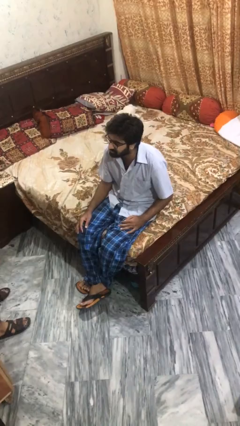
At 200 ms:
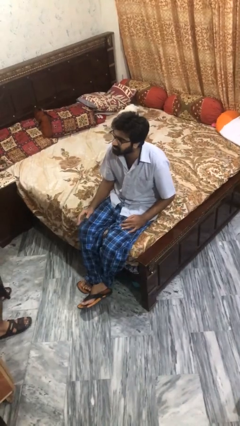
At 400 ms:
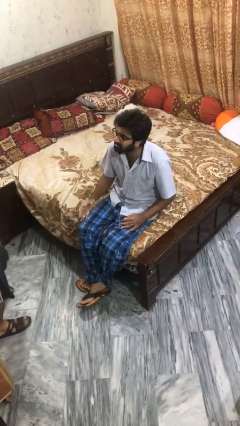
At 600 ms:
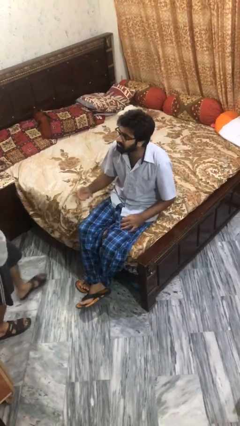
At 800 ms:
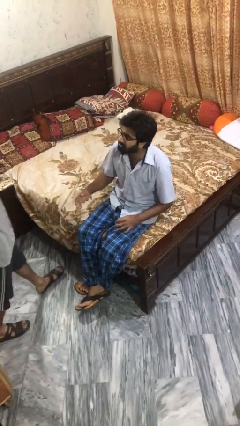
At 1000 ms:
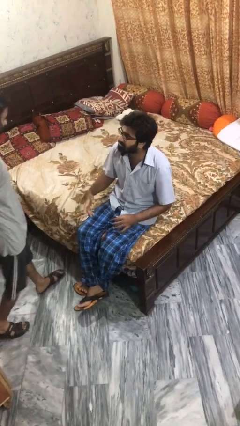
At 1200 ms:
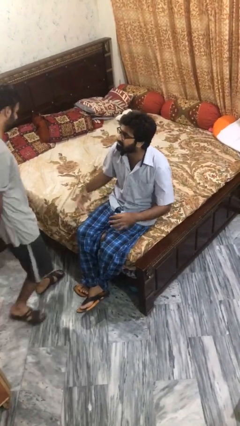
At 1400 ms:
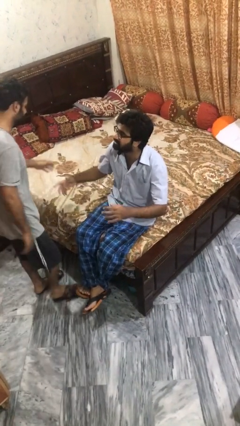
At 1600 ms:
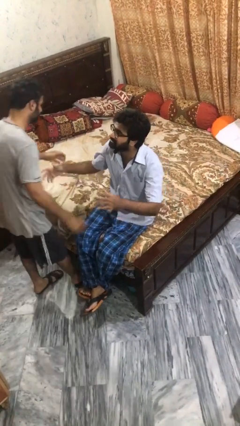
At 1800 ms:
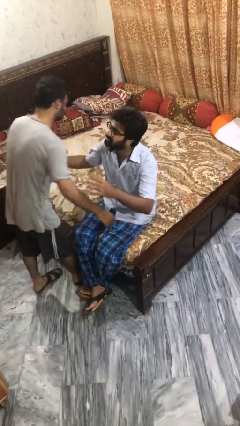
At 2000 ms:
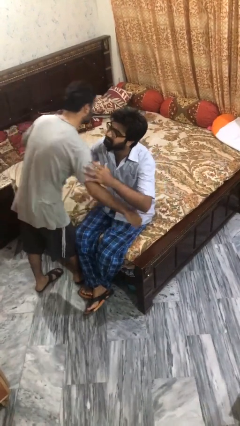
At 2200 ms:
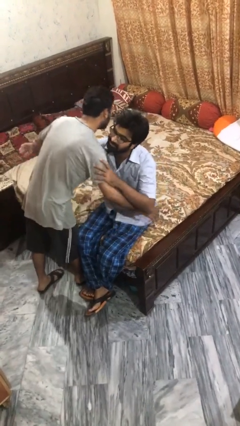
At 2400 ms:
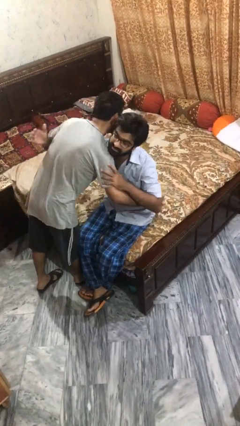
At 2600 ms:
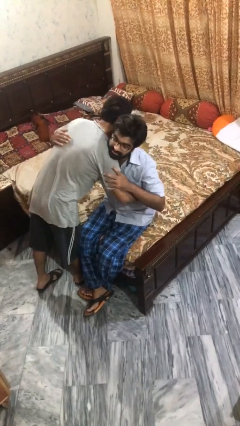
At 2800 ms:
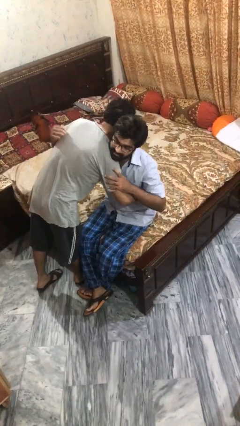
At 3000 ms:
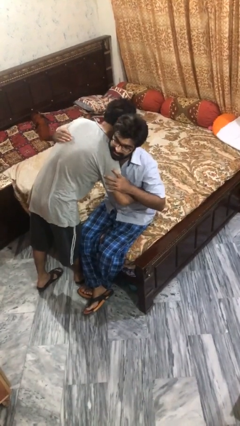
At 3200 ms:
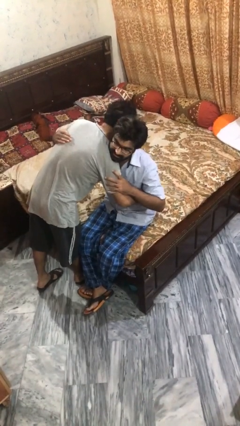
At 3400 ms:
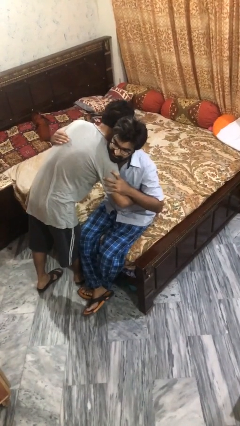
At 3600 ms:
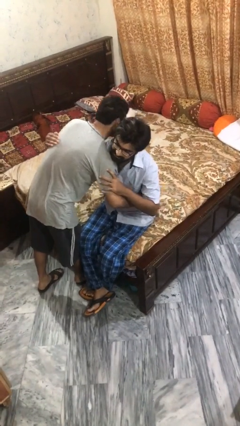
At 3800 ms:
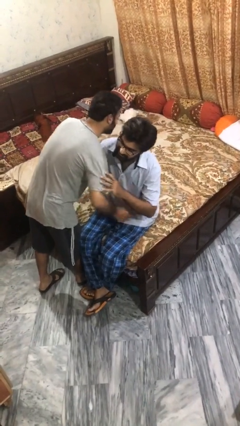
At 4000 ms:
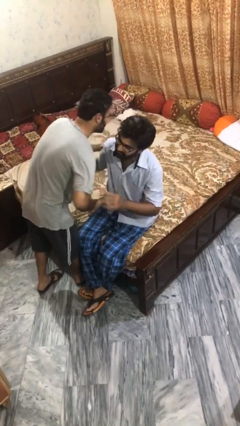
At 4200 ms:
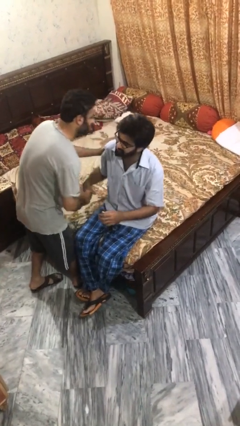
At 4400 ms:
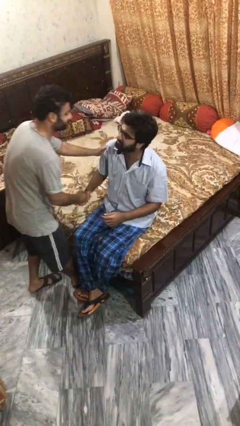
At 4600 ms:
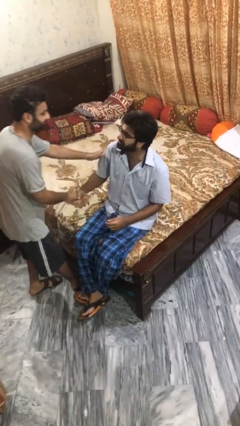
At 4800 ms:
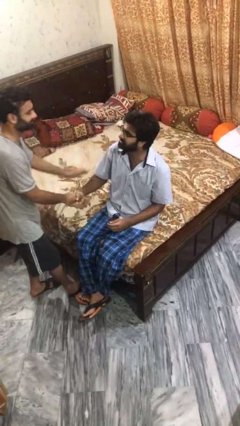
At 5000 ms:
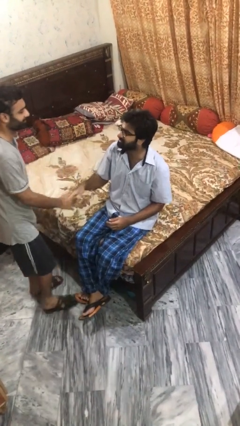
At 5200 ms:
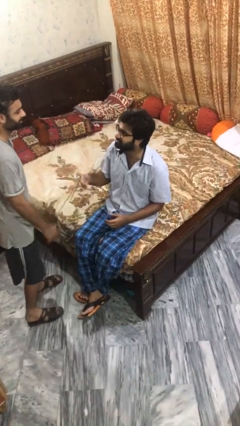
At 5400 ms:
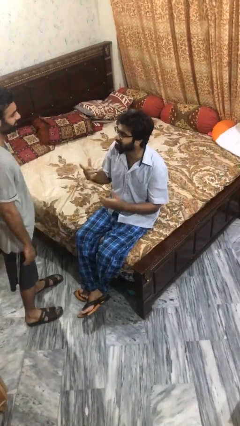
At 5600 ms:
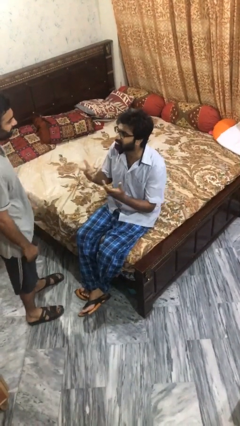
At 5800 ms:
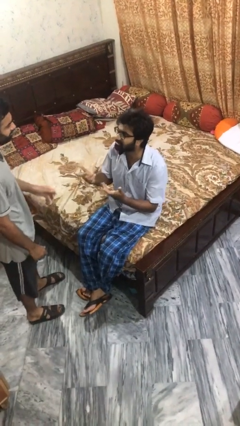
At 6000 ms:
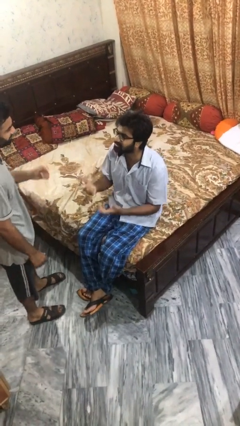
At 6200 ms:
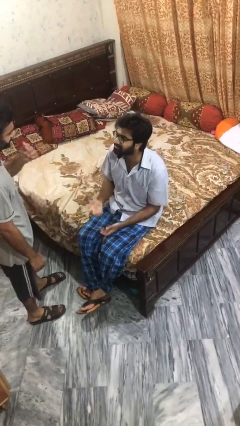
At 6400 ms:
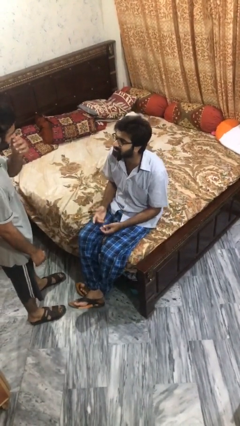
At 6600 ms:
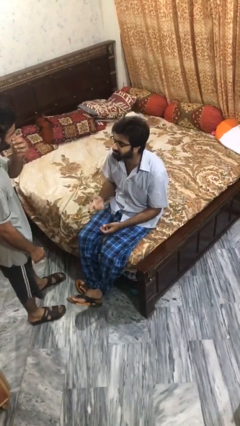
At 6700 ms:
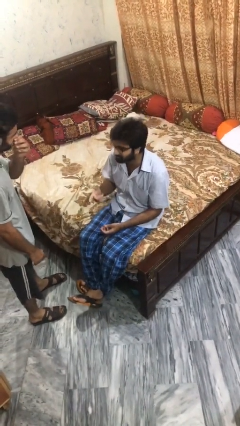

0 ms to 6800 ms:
person embraces person

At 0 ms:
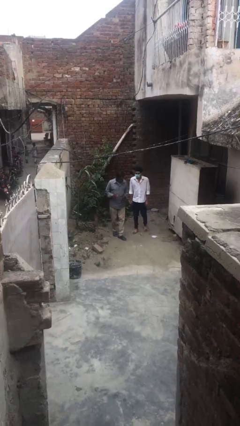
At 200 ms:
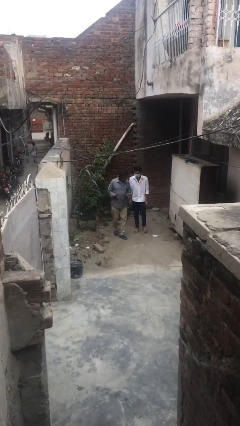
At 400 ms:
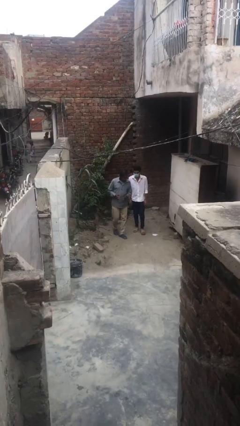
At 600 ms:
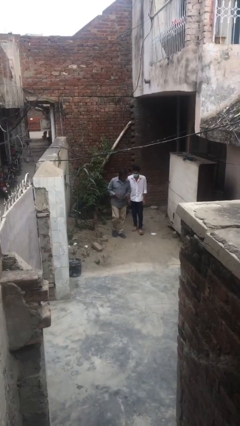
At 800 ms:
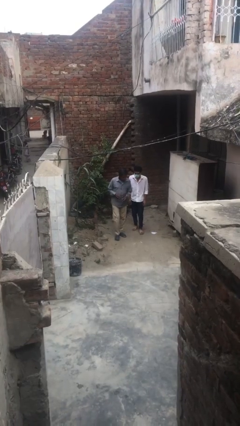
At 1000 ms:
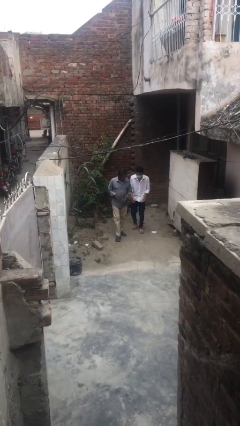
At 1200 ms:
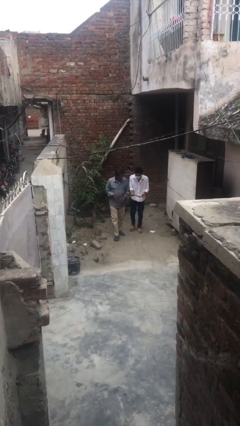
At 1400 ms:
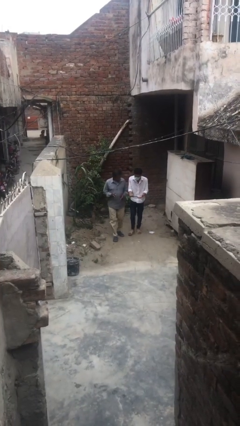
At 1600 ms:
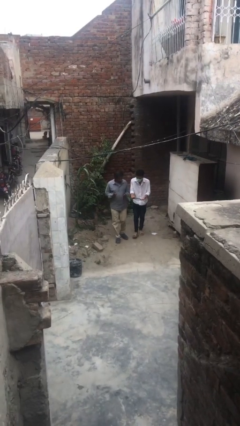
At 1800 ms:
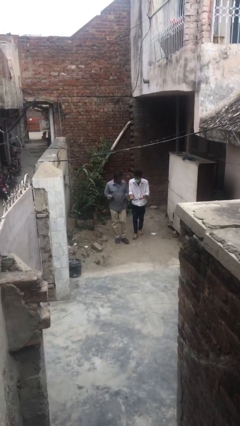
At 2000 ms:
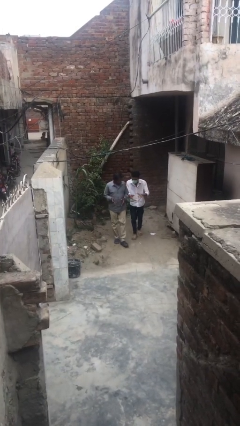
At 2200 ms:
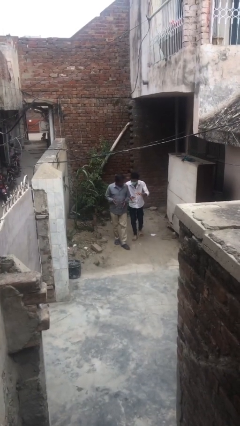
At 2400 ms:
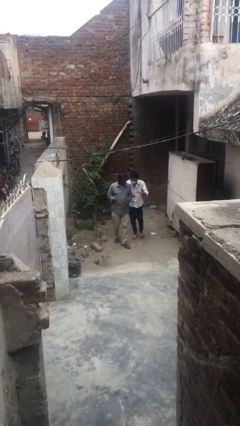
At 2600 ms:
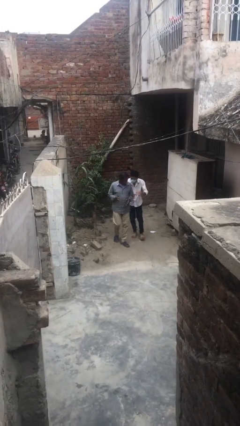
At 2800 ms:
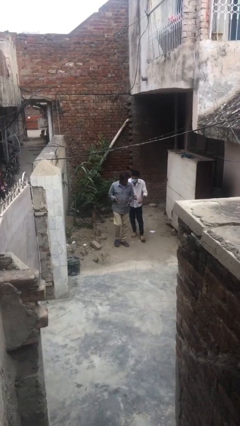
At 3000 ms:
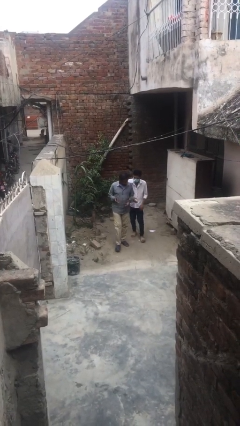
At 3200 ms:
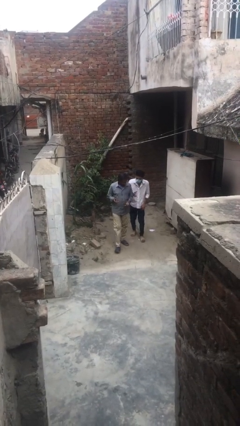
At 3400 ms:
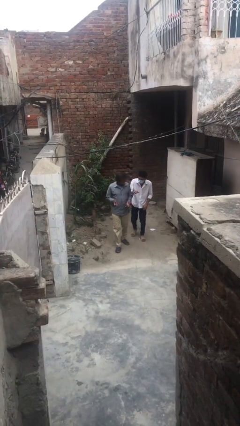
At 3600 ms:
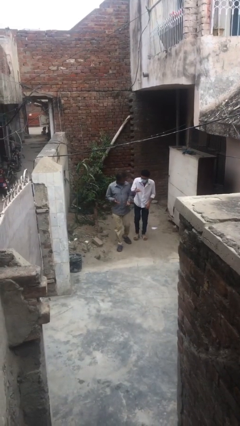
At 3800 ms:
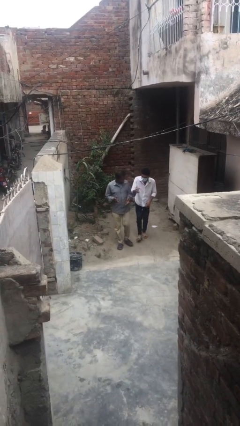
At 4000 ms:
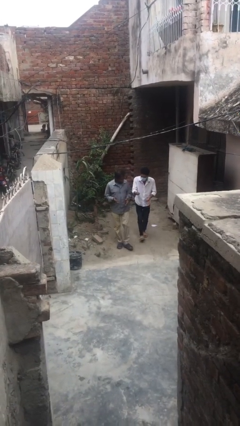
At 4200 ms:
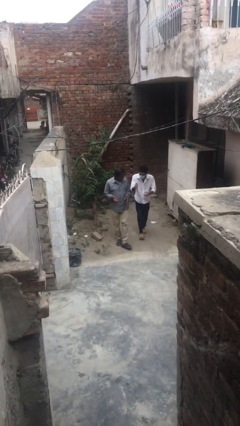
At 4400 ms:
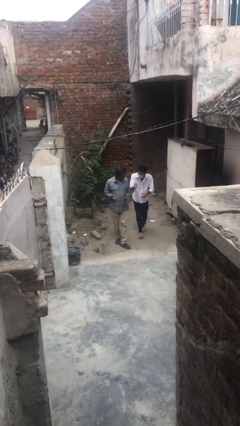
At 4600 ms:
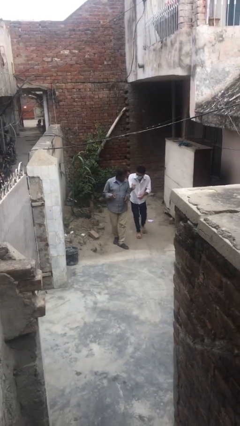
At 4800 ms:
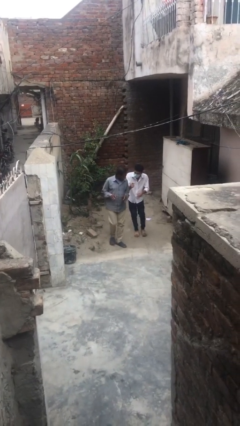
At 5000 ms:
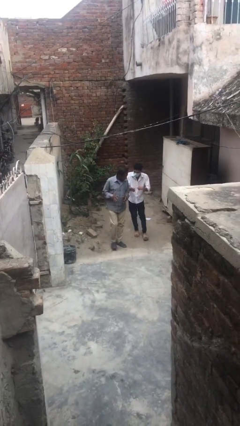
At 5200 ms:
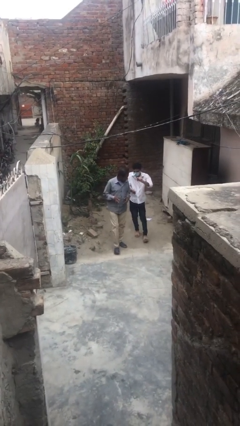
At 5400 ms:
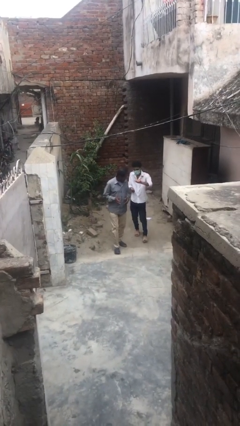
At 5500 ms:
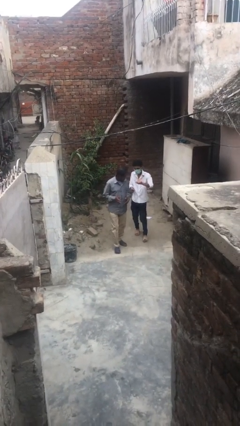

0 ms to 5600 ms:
person talks to person

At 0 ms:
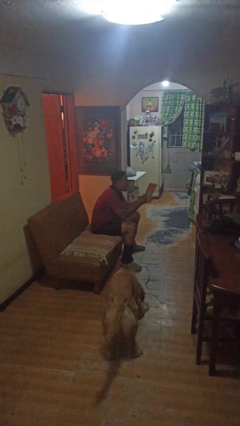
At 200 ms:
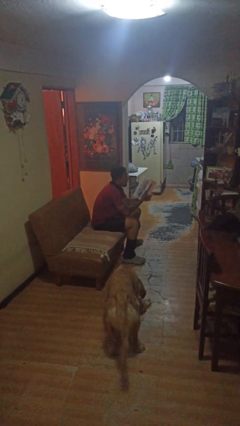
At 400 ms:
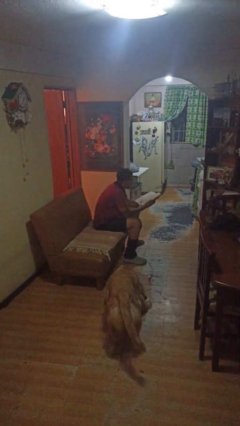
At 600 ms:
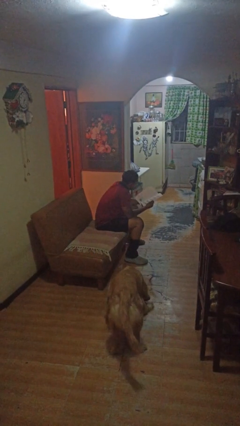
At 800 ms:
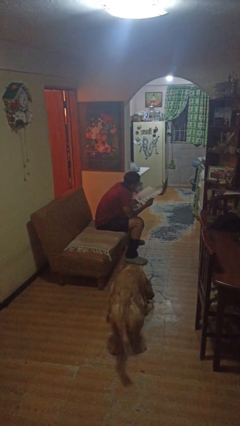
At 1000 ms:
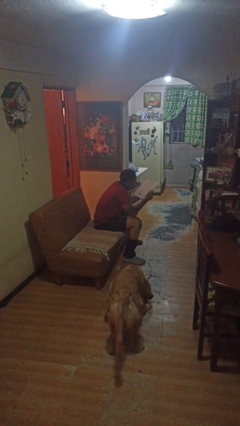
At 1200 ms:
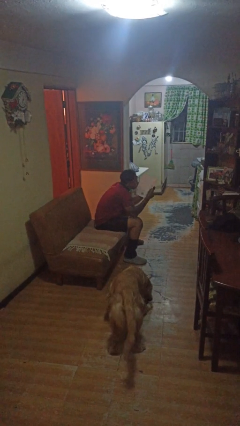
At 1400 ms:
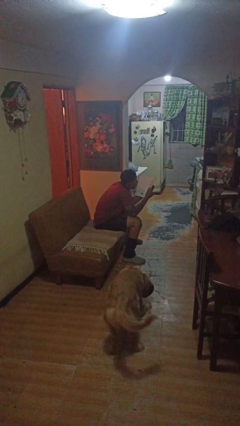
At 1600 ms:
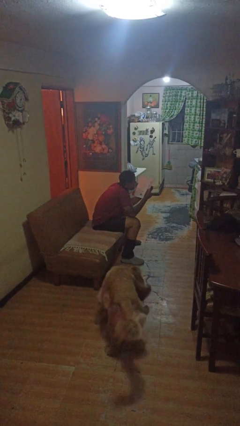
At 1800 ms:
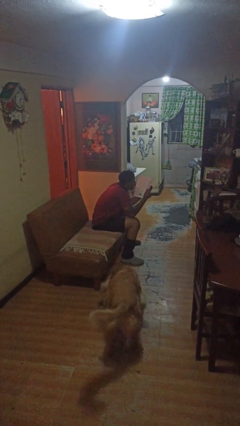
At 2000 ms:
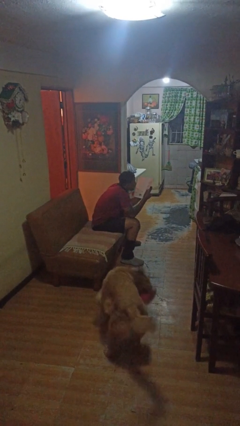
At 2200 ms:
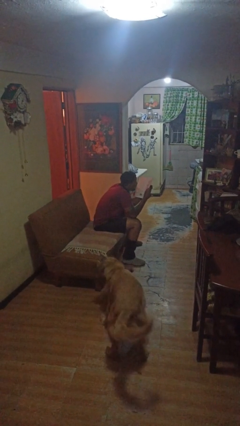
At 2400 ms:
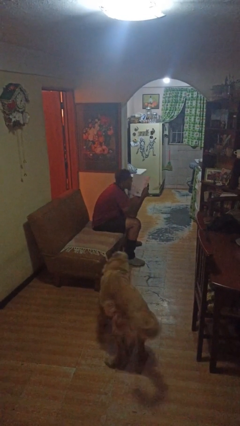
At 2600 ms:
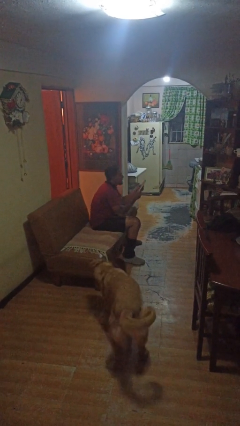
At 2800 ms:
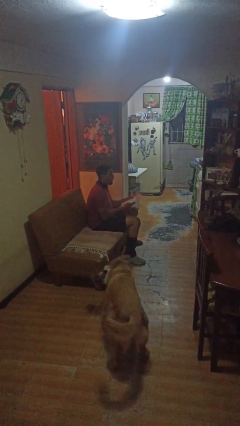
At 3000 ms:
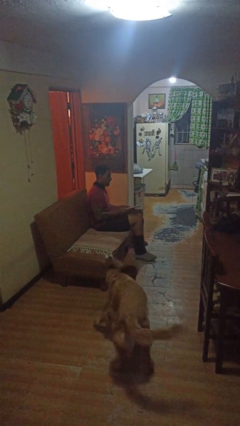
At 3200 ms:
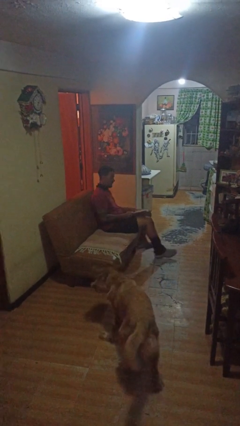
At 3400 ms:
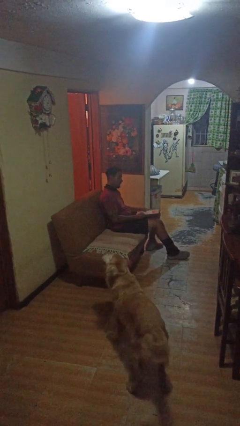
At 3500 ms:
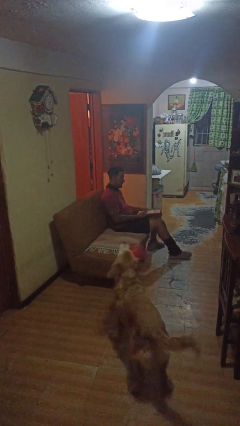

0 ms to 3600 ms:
person reads document

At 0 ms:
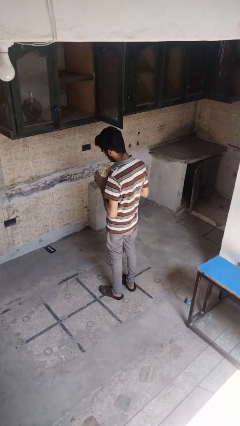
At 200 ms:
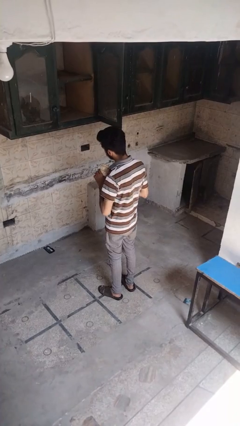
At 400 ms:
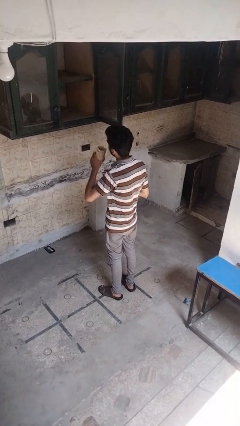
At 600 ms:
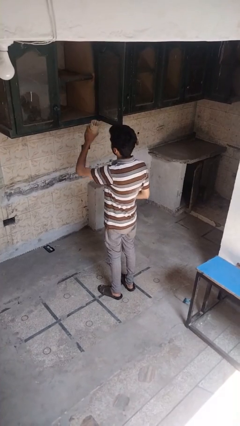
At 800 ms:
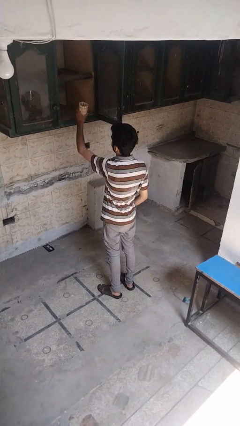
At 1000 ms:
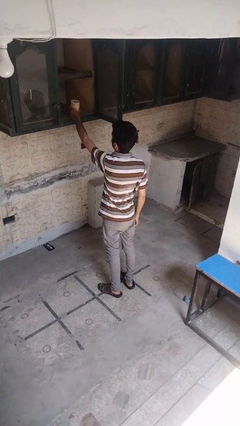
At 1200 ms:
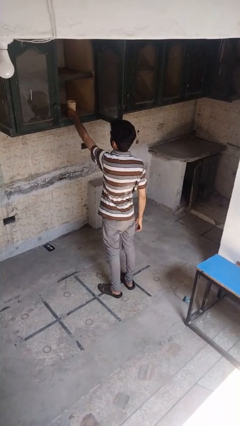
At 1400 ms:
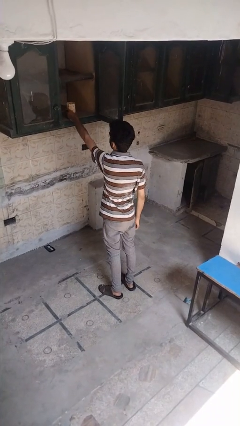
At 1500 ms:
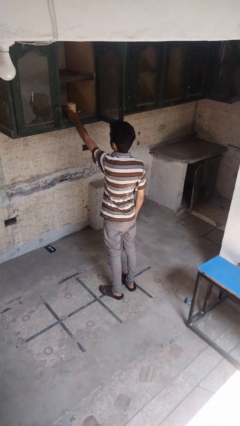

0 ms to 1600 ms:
person puts down object into cabinet

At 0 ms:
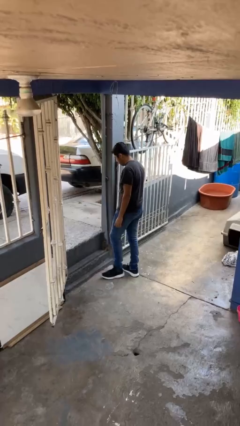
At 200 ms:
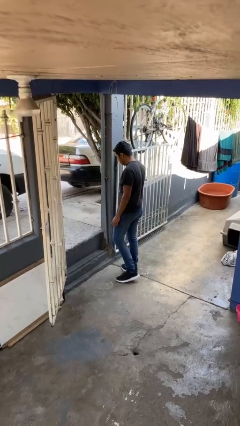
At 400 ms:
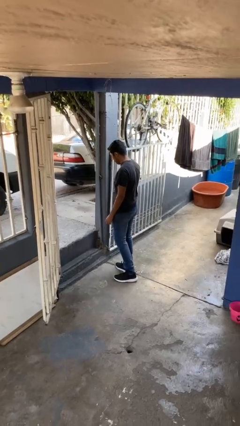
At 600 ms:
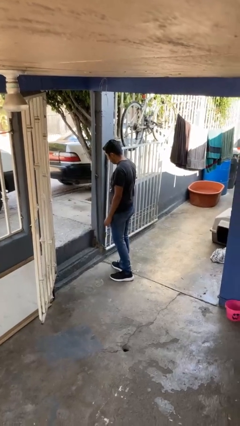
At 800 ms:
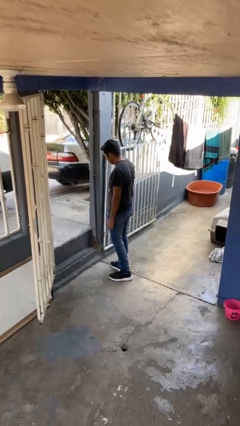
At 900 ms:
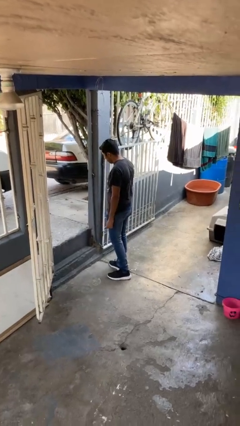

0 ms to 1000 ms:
person bumps into wall
